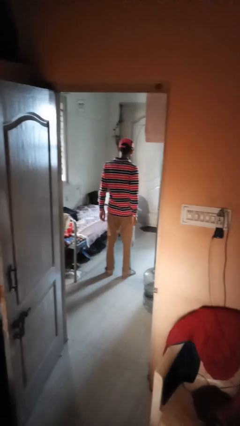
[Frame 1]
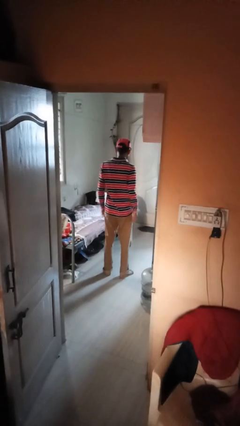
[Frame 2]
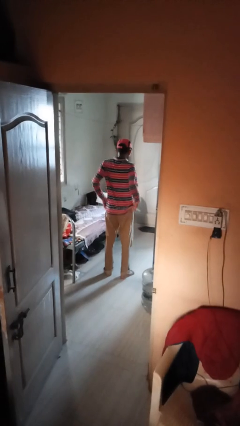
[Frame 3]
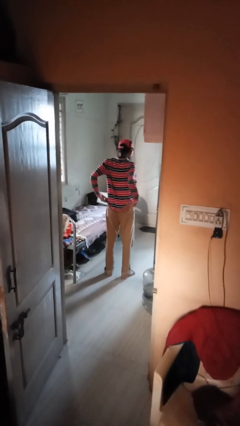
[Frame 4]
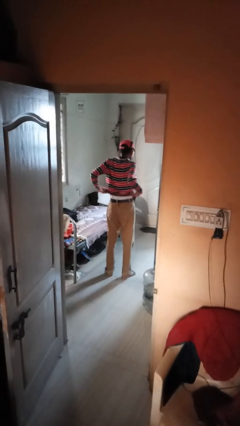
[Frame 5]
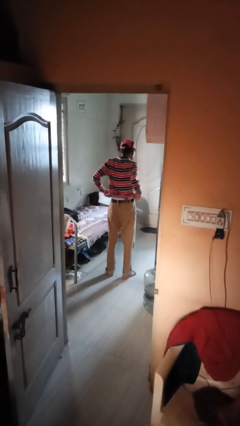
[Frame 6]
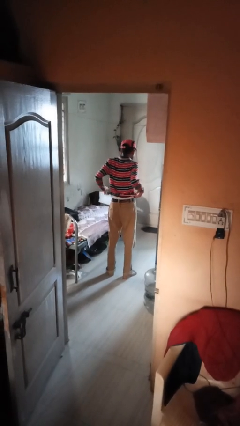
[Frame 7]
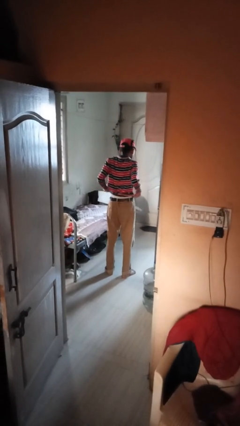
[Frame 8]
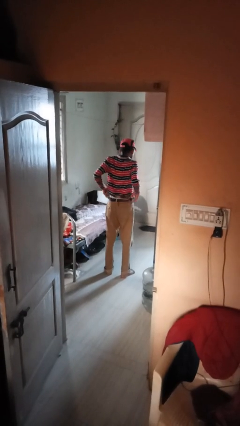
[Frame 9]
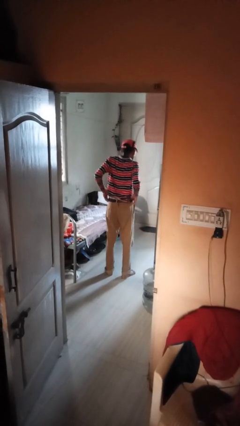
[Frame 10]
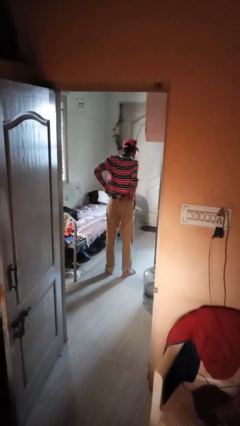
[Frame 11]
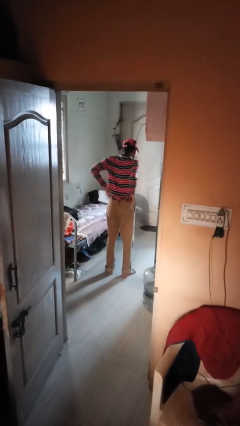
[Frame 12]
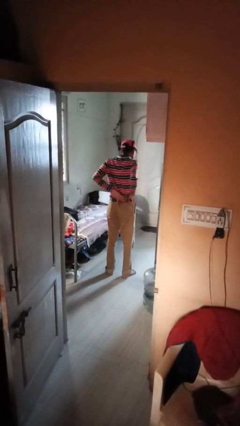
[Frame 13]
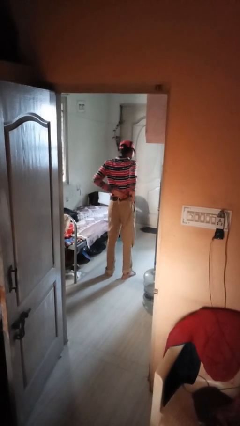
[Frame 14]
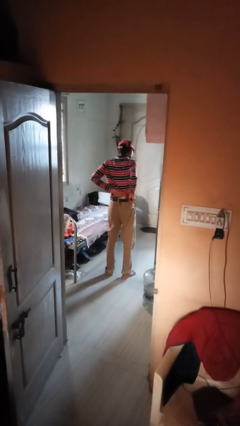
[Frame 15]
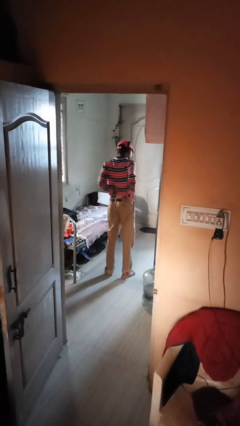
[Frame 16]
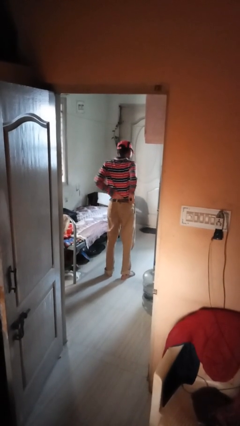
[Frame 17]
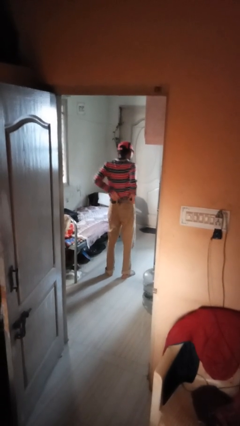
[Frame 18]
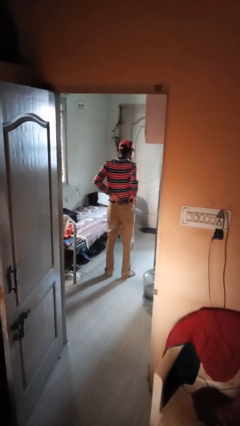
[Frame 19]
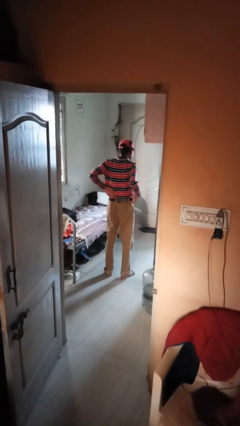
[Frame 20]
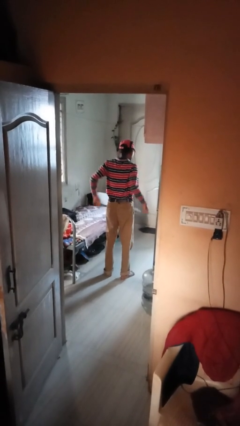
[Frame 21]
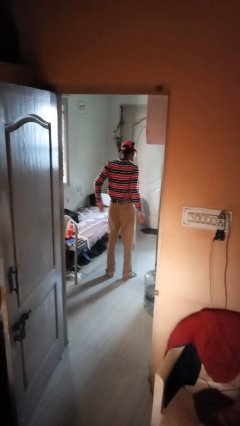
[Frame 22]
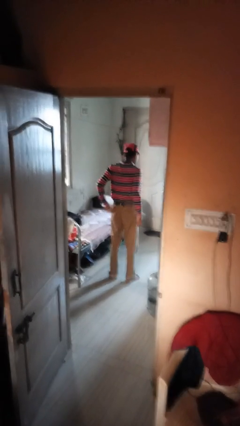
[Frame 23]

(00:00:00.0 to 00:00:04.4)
person tucks in shirt

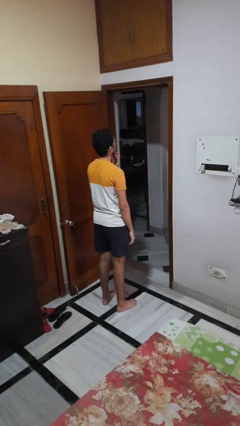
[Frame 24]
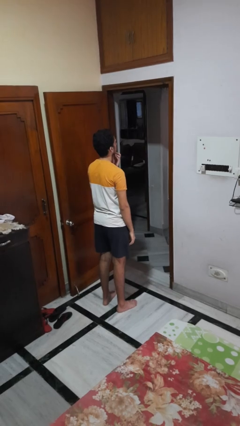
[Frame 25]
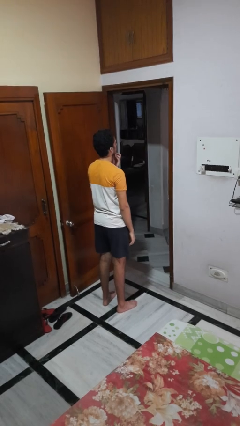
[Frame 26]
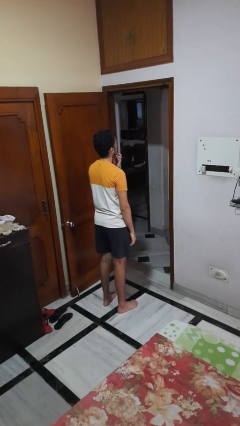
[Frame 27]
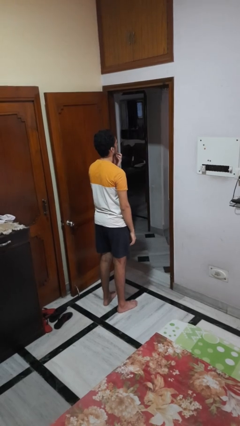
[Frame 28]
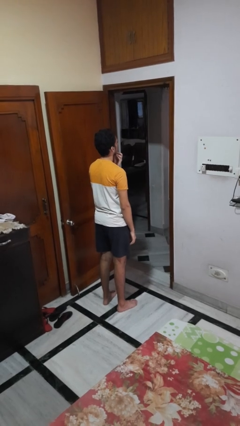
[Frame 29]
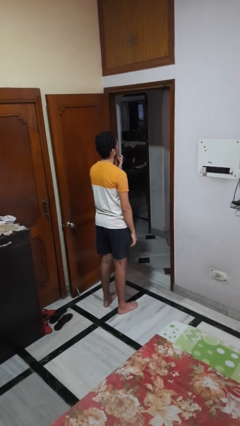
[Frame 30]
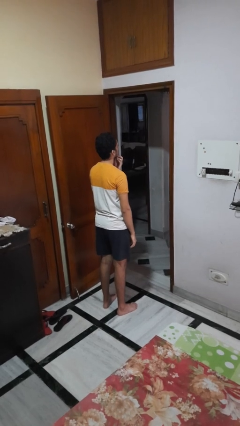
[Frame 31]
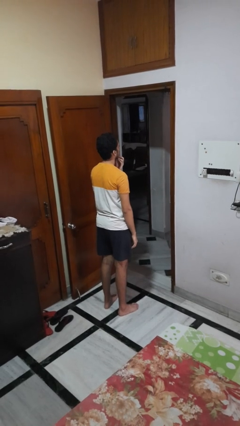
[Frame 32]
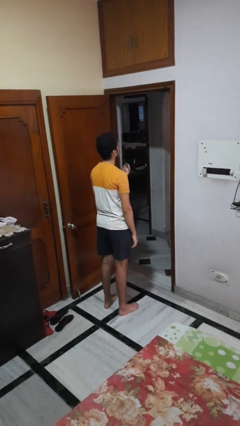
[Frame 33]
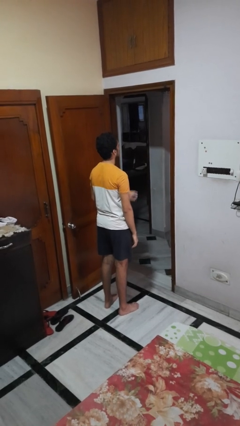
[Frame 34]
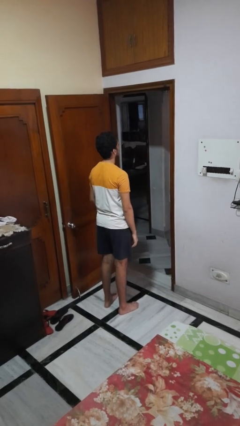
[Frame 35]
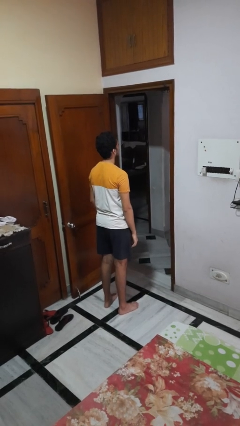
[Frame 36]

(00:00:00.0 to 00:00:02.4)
person strokes chin

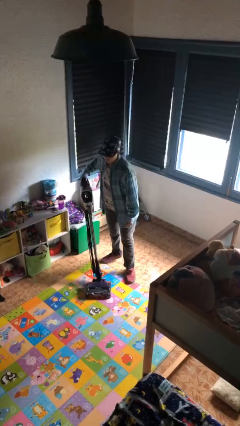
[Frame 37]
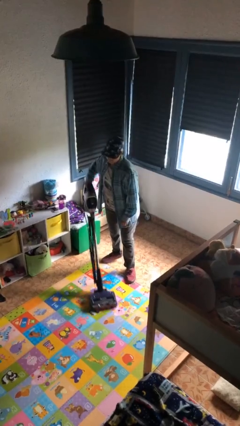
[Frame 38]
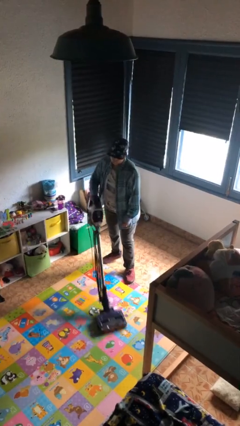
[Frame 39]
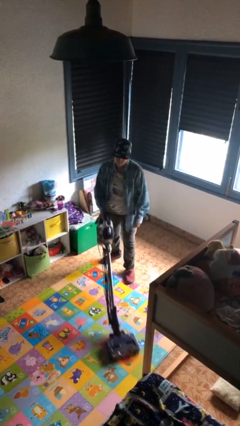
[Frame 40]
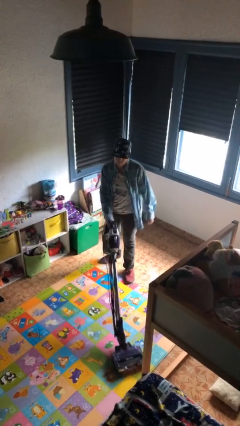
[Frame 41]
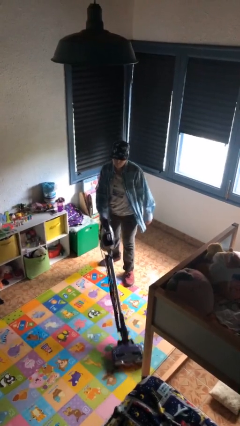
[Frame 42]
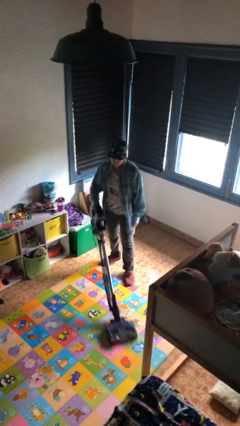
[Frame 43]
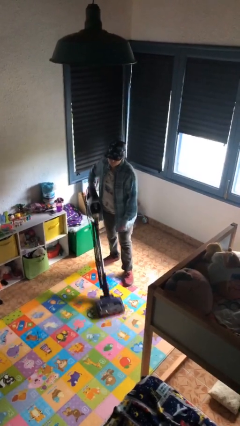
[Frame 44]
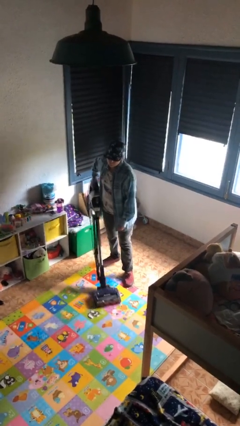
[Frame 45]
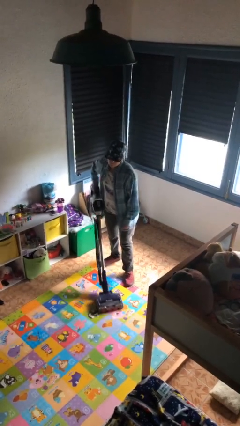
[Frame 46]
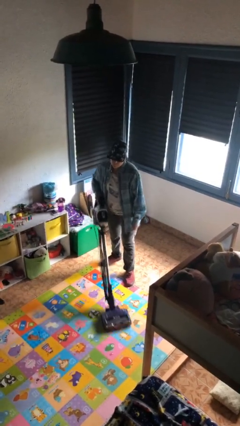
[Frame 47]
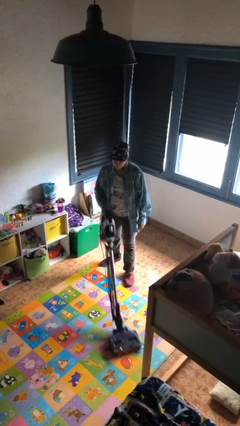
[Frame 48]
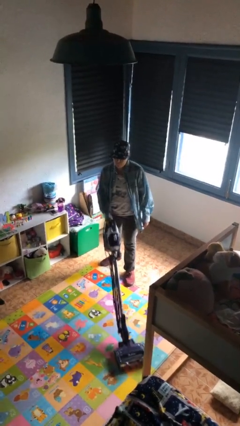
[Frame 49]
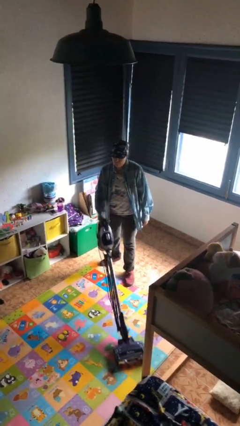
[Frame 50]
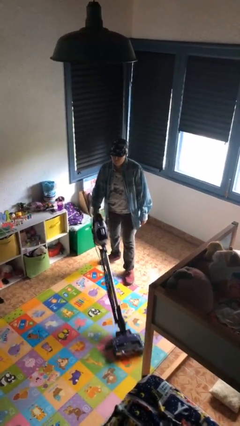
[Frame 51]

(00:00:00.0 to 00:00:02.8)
person vacuums carpet

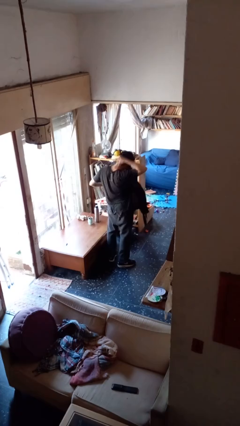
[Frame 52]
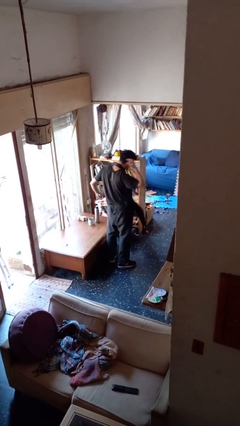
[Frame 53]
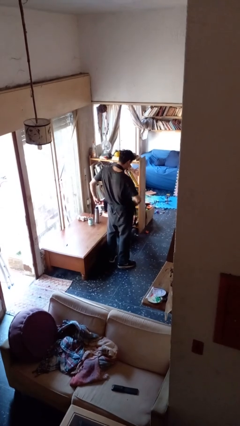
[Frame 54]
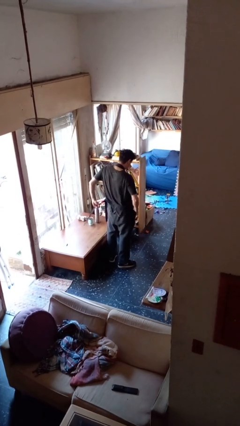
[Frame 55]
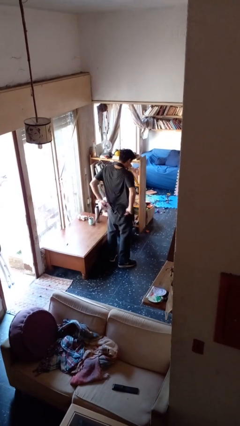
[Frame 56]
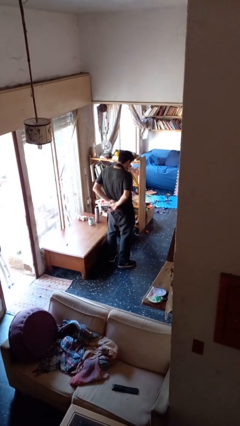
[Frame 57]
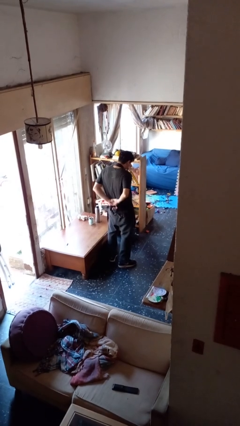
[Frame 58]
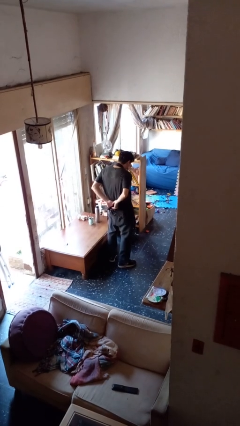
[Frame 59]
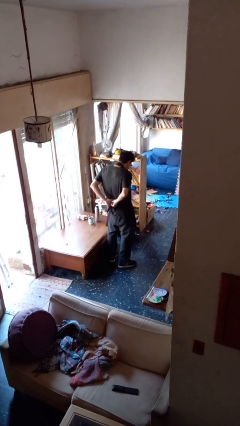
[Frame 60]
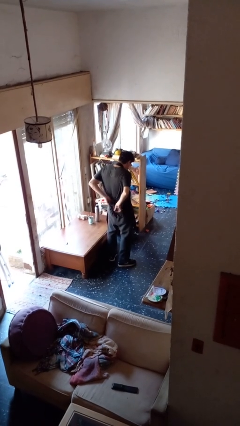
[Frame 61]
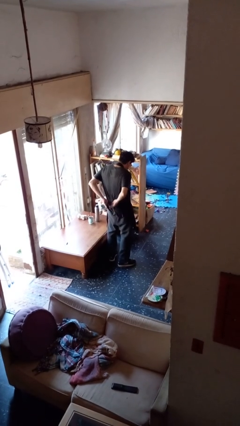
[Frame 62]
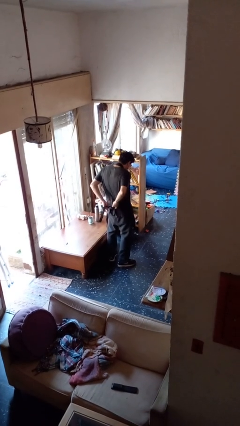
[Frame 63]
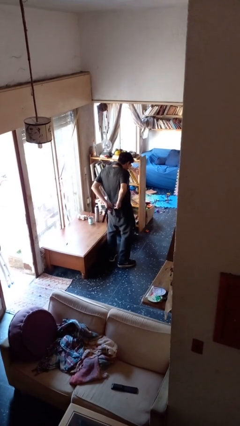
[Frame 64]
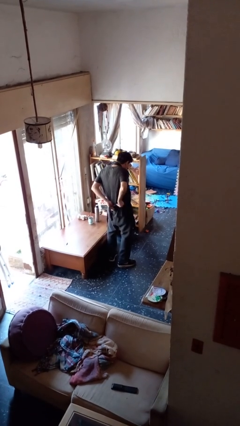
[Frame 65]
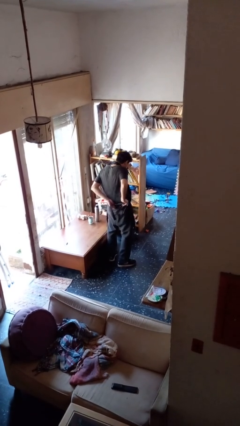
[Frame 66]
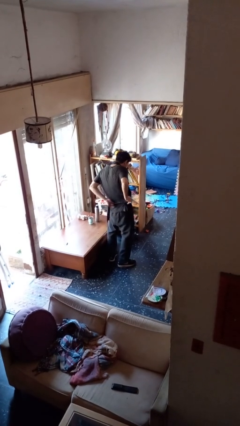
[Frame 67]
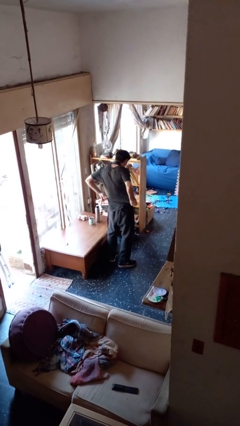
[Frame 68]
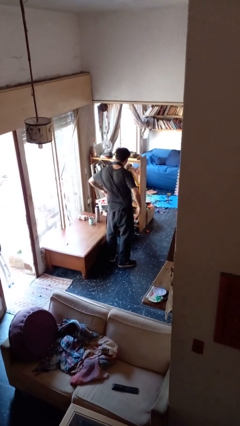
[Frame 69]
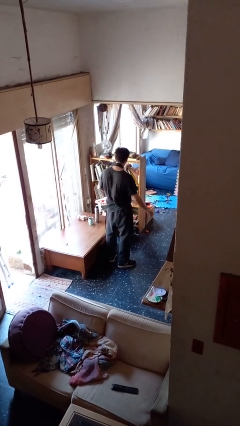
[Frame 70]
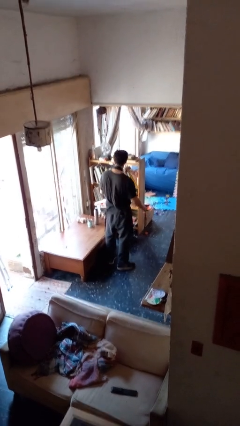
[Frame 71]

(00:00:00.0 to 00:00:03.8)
person puts on apron

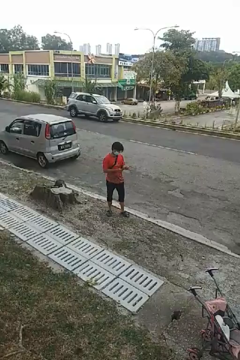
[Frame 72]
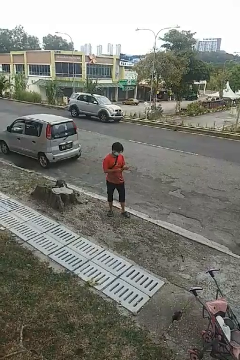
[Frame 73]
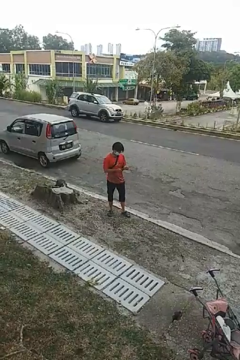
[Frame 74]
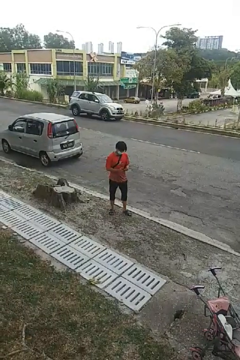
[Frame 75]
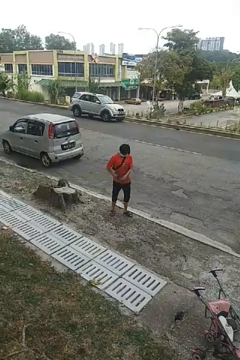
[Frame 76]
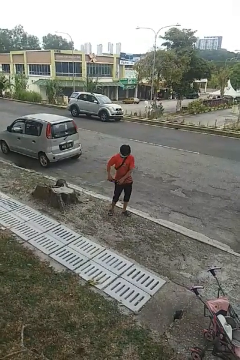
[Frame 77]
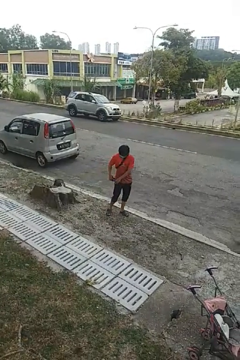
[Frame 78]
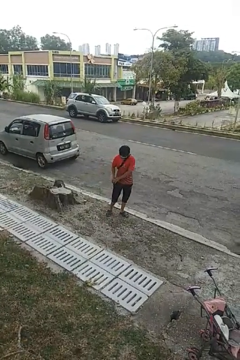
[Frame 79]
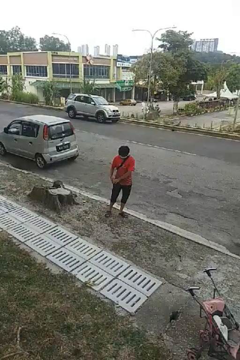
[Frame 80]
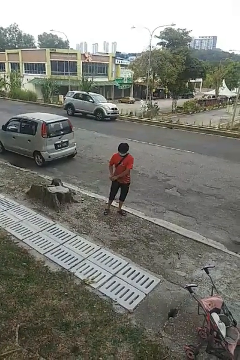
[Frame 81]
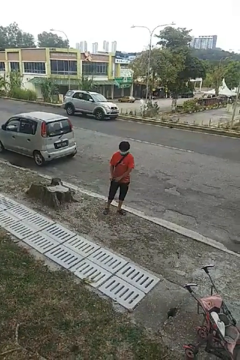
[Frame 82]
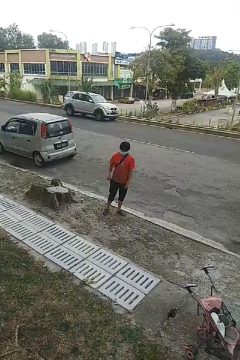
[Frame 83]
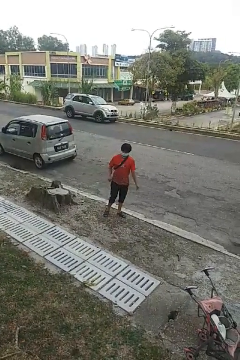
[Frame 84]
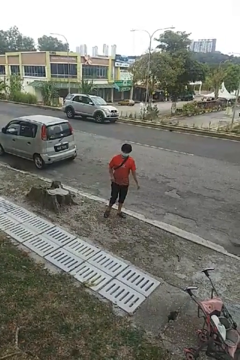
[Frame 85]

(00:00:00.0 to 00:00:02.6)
person puts phone into pocket

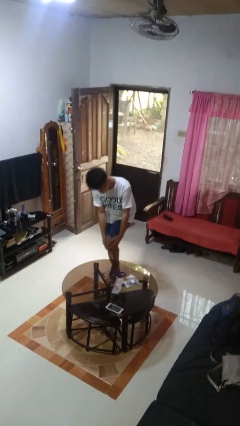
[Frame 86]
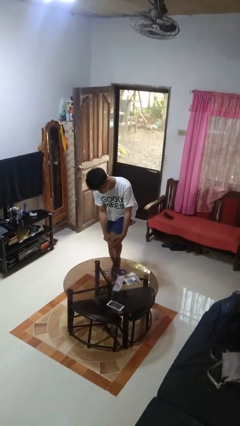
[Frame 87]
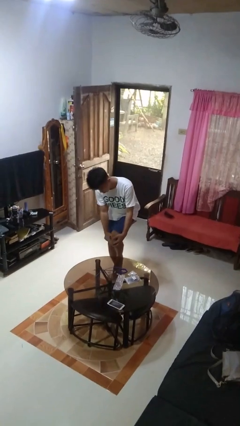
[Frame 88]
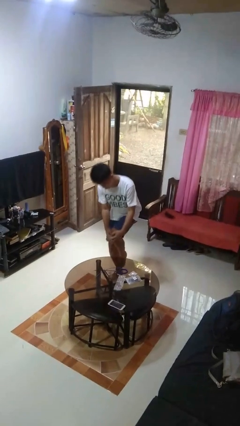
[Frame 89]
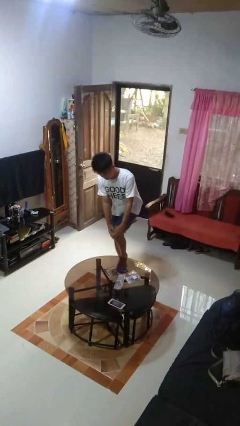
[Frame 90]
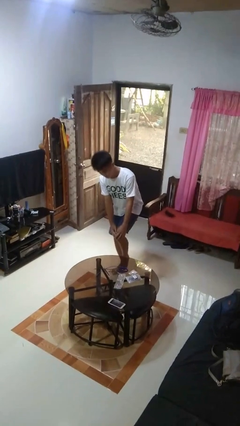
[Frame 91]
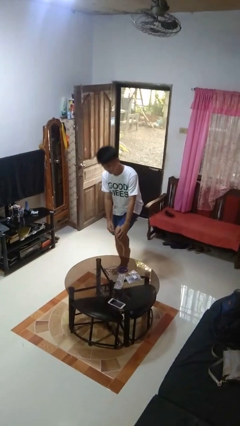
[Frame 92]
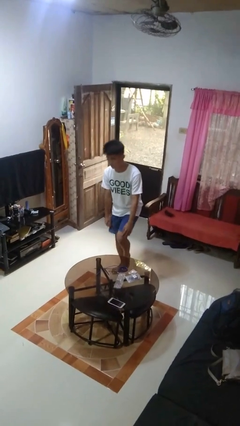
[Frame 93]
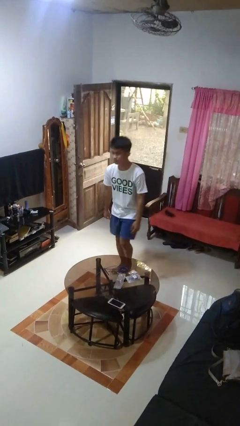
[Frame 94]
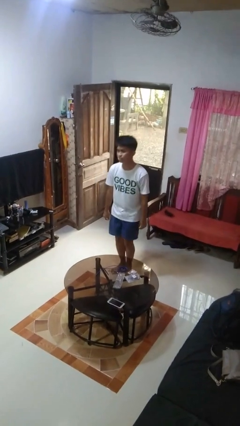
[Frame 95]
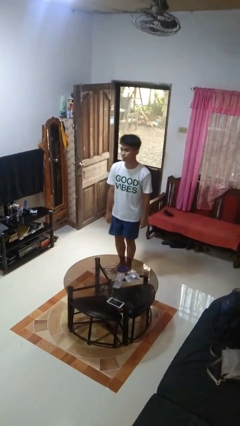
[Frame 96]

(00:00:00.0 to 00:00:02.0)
person bumps into table
